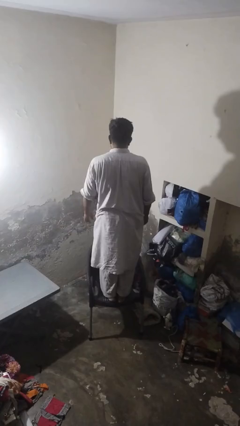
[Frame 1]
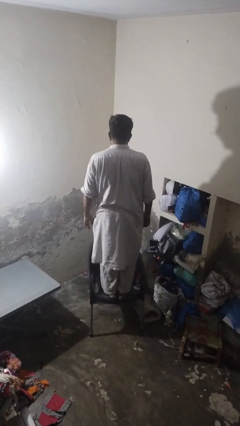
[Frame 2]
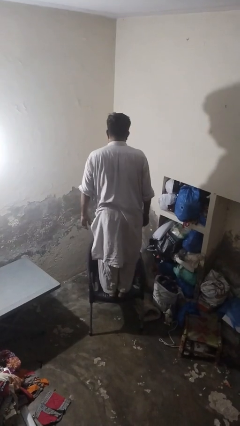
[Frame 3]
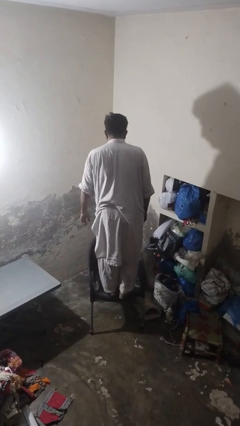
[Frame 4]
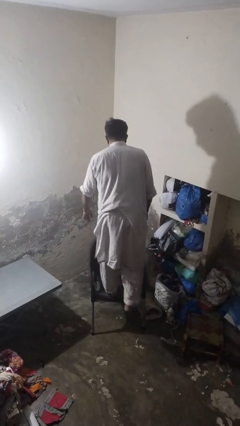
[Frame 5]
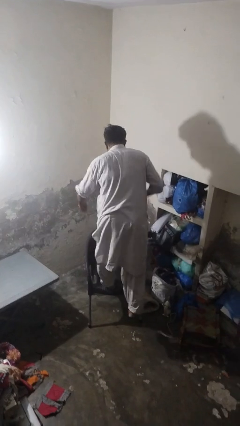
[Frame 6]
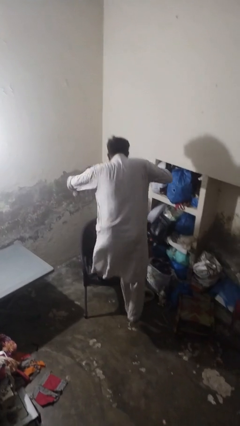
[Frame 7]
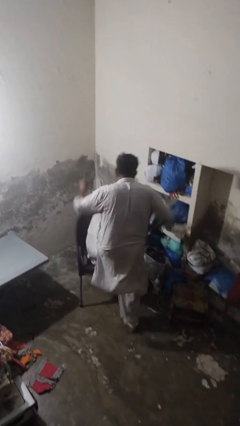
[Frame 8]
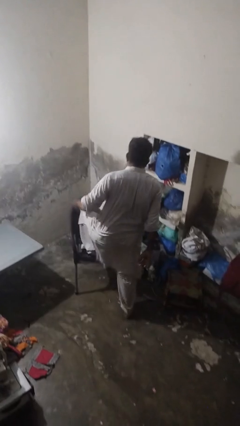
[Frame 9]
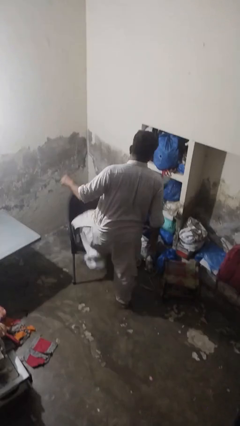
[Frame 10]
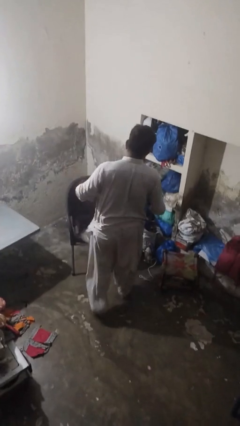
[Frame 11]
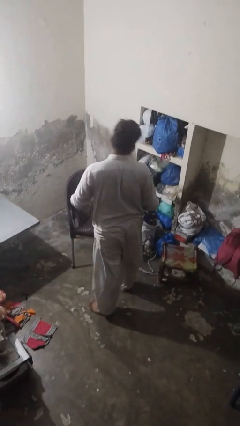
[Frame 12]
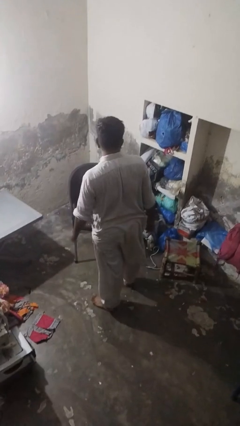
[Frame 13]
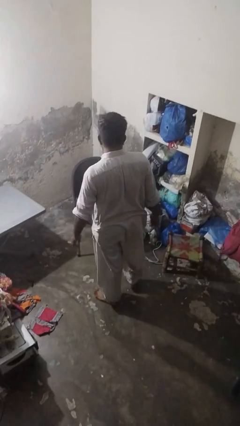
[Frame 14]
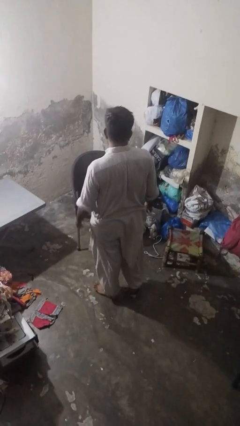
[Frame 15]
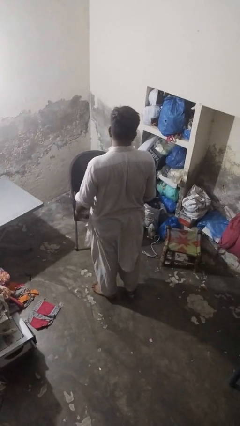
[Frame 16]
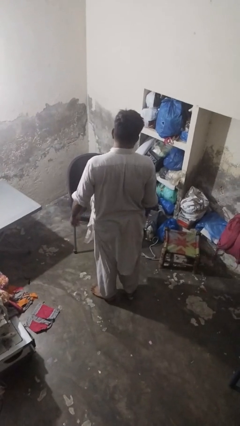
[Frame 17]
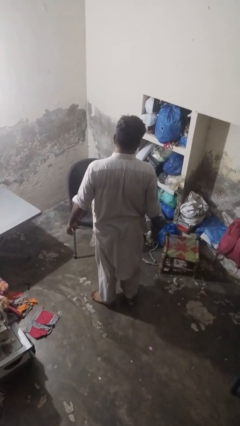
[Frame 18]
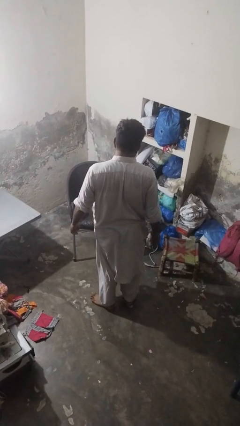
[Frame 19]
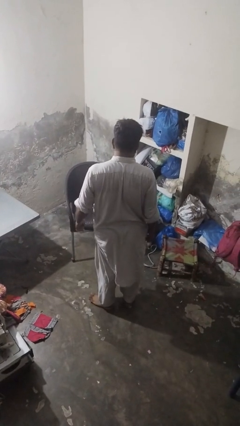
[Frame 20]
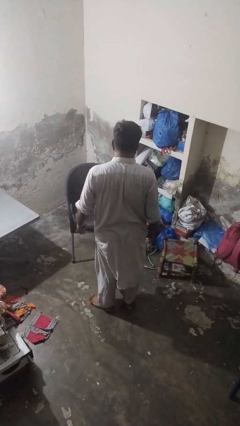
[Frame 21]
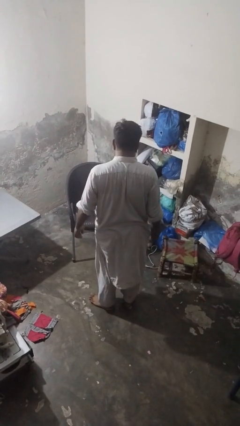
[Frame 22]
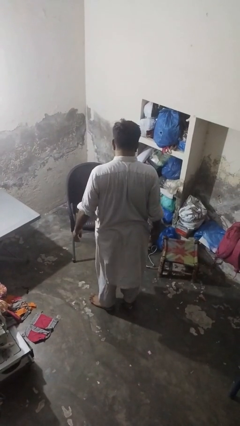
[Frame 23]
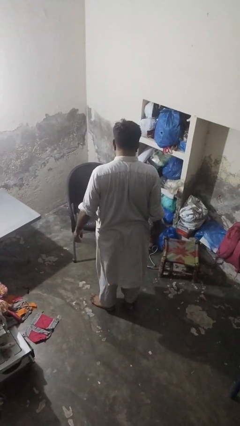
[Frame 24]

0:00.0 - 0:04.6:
person climbs off chair

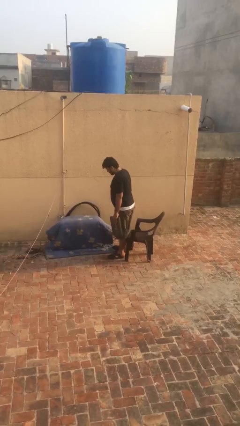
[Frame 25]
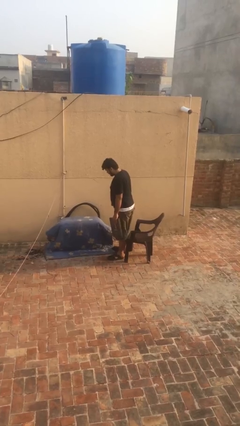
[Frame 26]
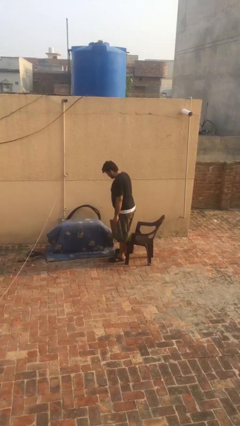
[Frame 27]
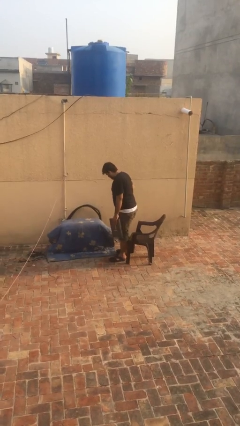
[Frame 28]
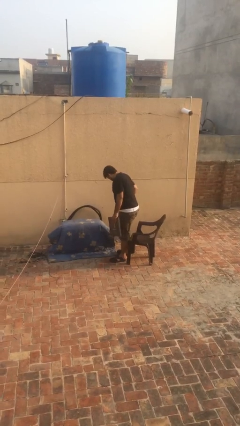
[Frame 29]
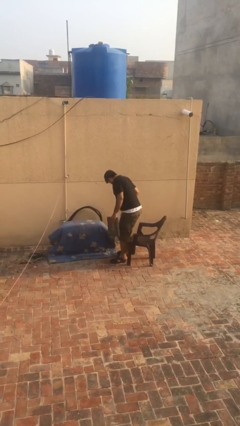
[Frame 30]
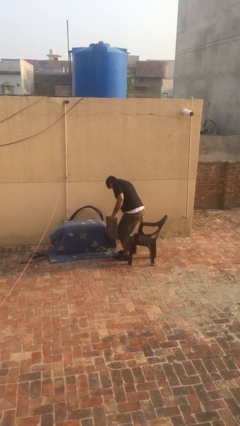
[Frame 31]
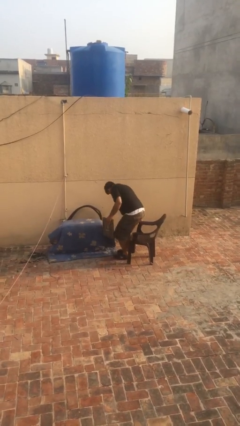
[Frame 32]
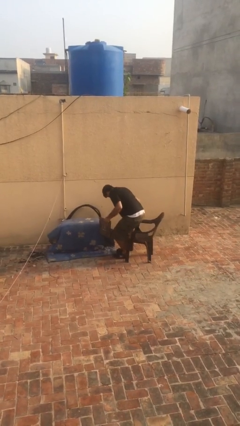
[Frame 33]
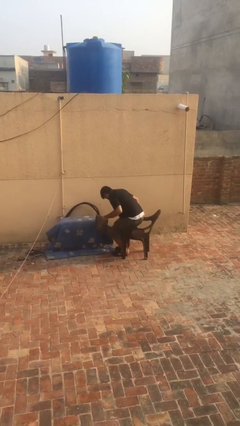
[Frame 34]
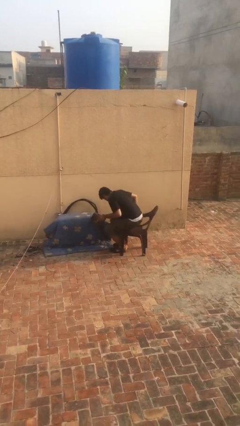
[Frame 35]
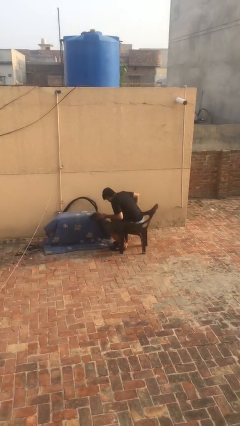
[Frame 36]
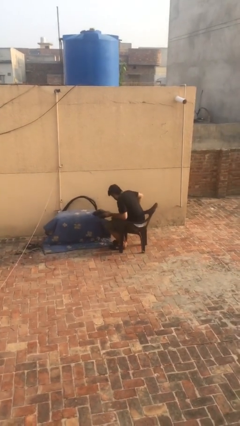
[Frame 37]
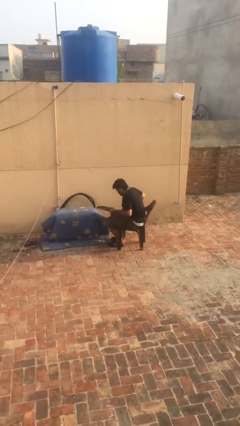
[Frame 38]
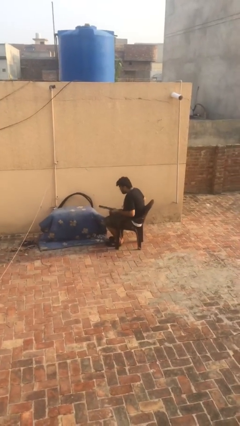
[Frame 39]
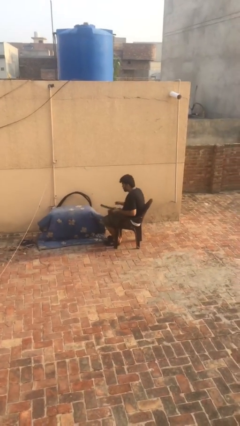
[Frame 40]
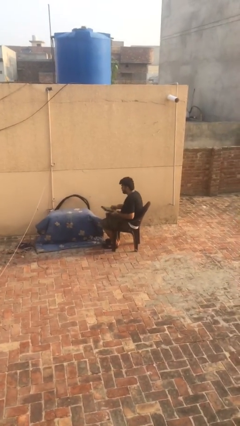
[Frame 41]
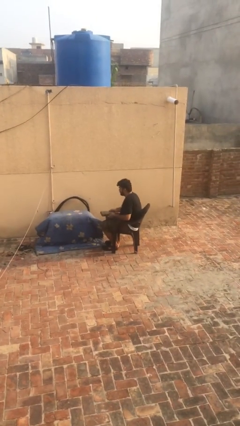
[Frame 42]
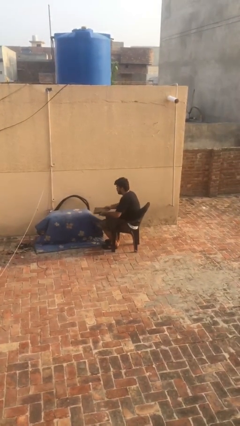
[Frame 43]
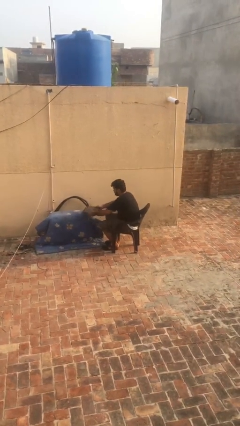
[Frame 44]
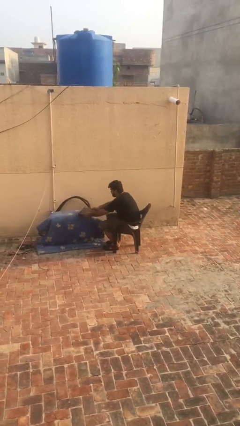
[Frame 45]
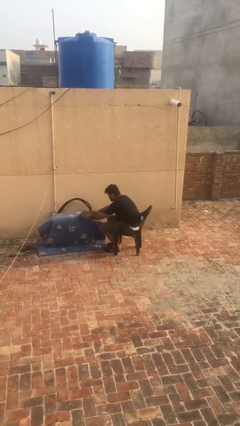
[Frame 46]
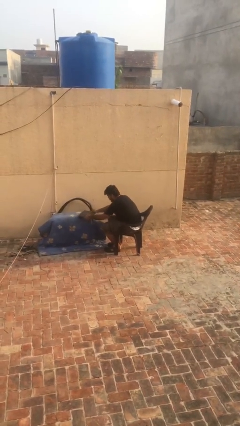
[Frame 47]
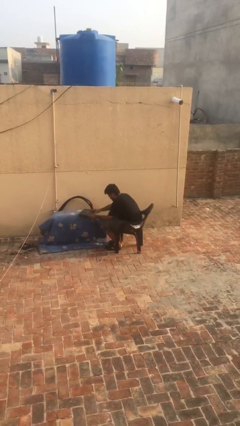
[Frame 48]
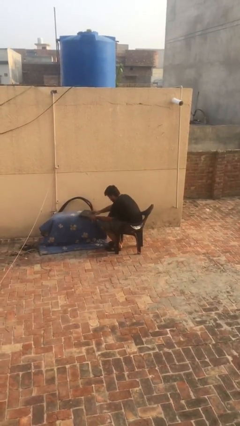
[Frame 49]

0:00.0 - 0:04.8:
person sits down

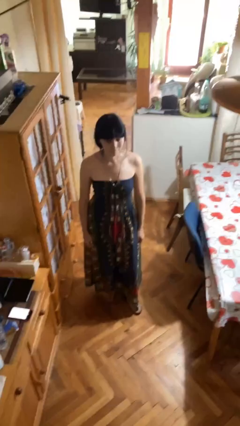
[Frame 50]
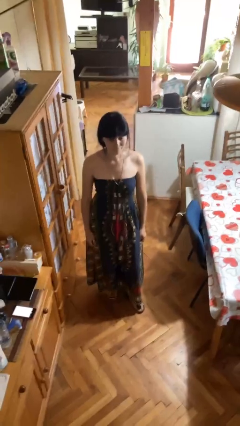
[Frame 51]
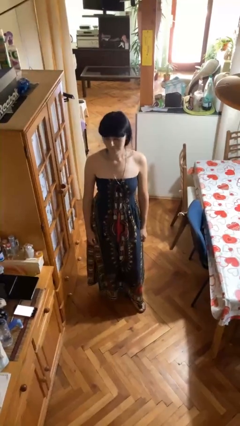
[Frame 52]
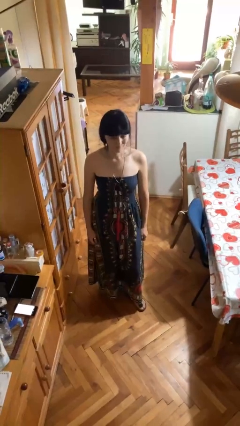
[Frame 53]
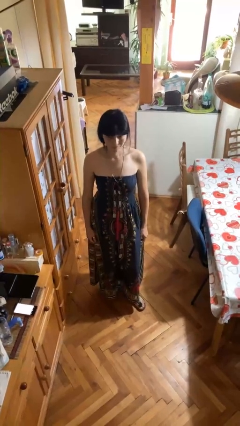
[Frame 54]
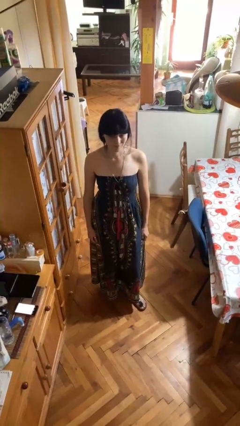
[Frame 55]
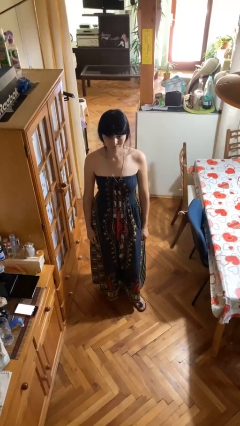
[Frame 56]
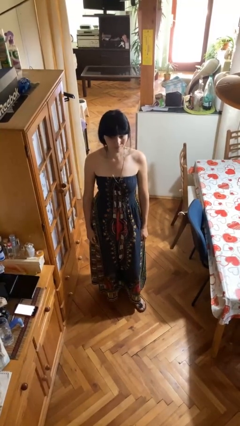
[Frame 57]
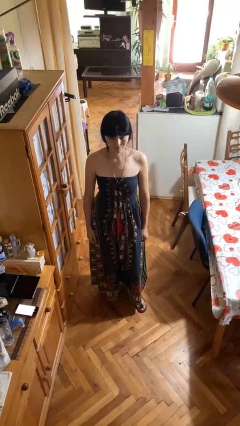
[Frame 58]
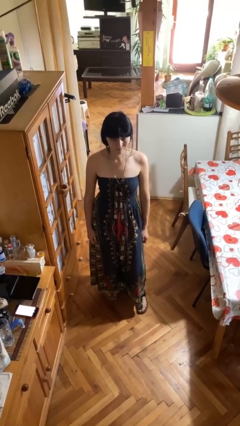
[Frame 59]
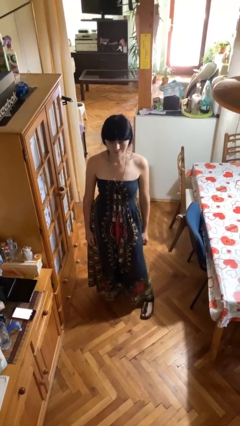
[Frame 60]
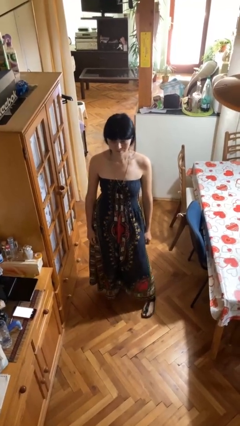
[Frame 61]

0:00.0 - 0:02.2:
person shakes head

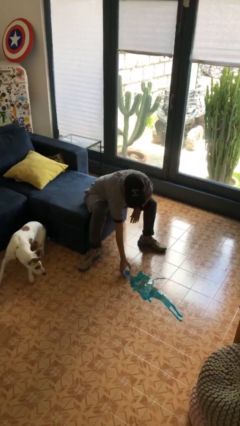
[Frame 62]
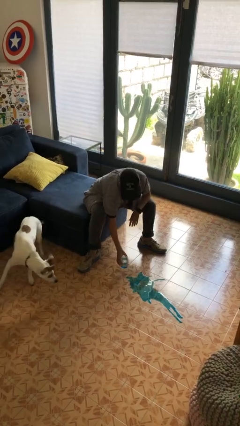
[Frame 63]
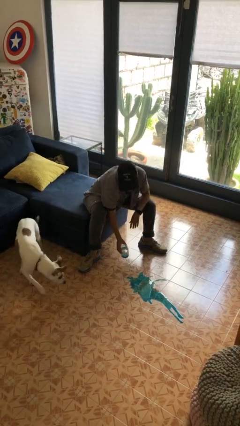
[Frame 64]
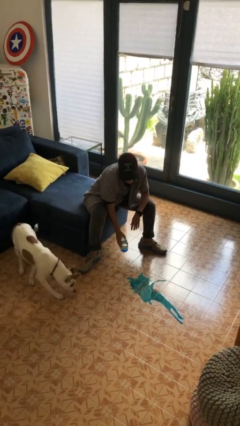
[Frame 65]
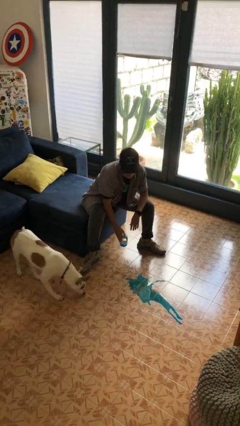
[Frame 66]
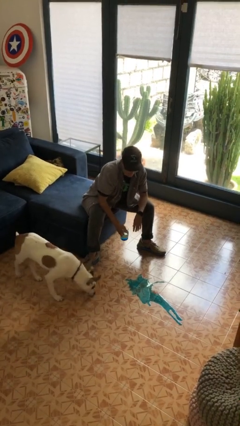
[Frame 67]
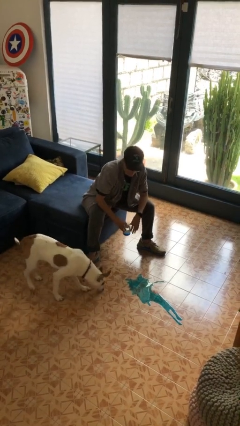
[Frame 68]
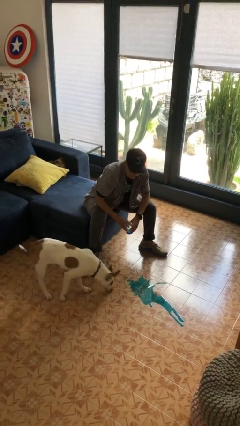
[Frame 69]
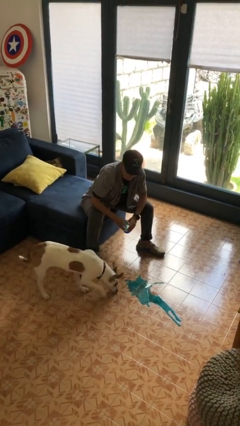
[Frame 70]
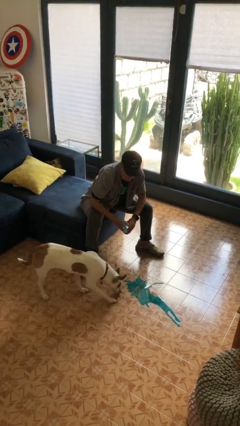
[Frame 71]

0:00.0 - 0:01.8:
person sets upright glass

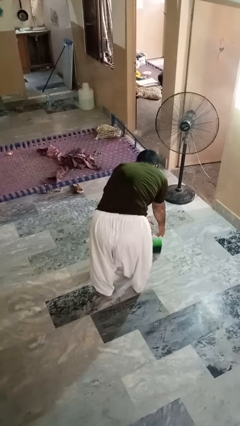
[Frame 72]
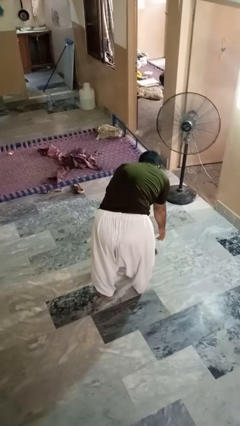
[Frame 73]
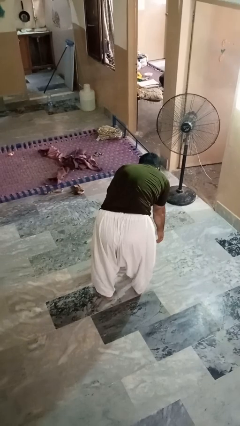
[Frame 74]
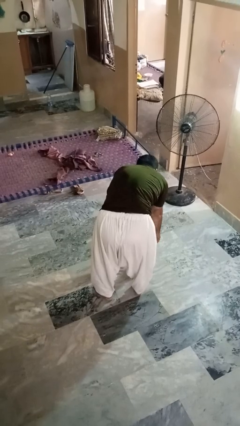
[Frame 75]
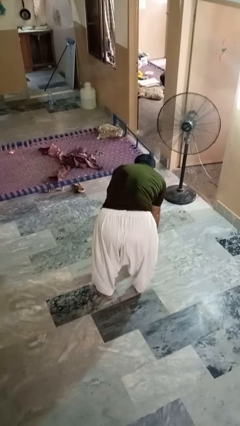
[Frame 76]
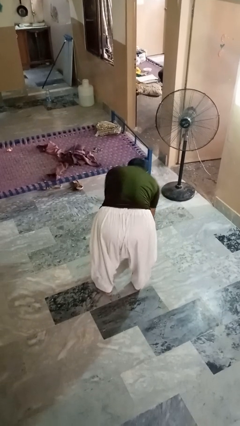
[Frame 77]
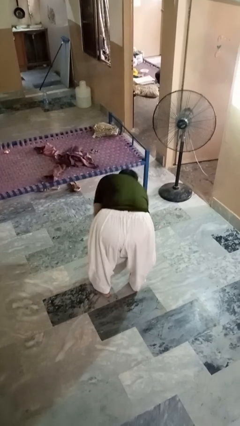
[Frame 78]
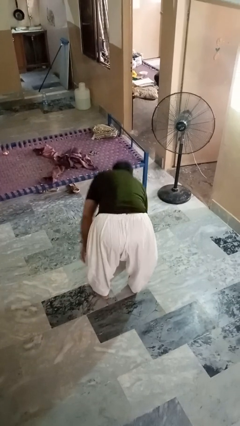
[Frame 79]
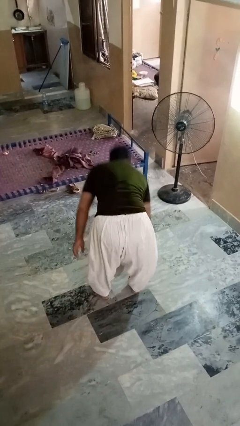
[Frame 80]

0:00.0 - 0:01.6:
person picks up object from floor

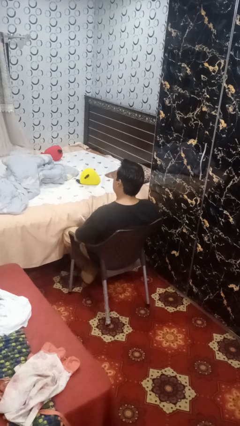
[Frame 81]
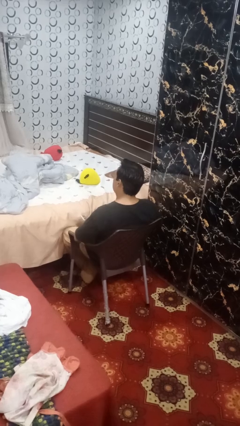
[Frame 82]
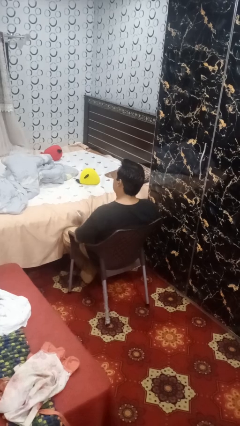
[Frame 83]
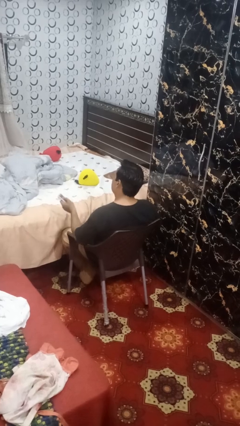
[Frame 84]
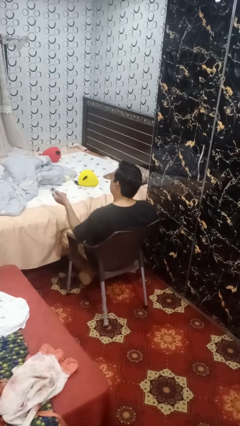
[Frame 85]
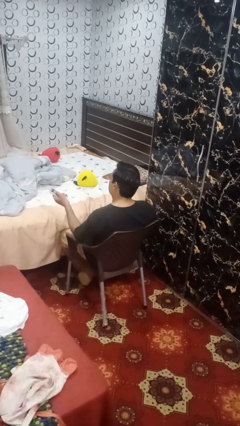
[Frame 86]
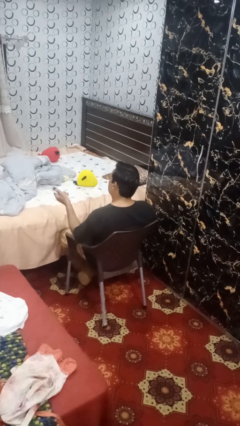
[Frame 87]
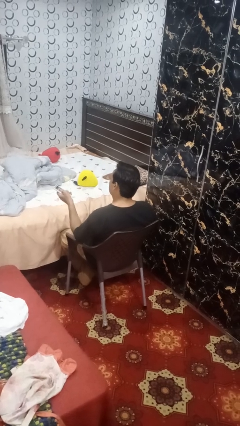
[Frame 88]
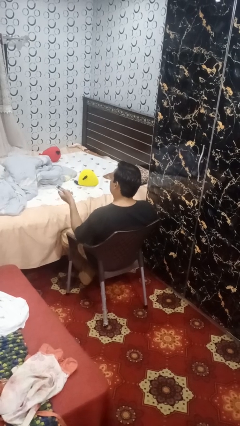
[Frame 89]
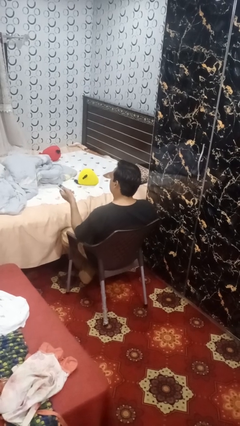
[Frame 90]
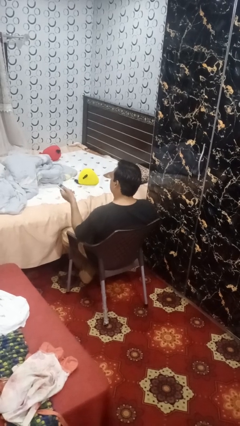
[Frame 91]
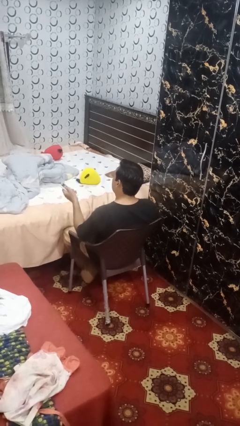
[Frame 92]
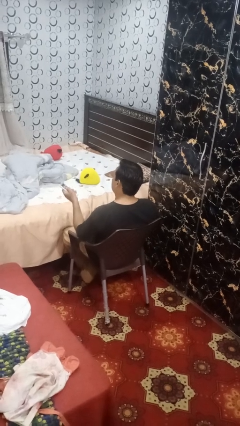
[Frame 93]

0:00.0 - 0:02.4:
person uses television remote

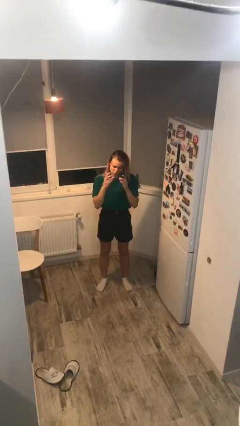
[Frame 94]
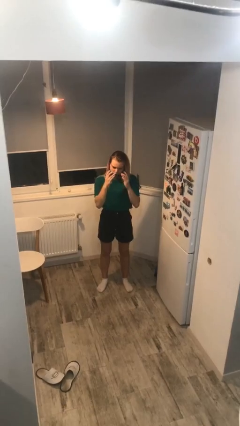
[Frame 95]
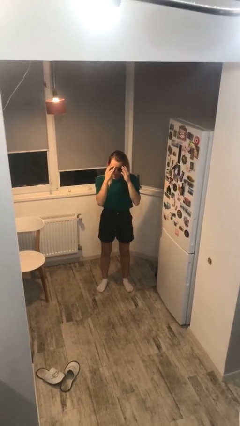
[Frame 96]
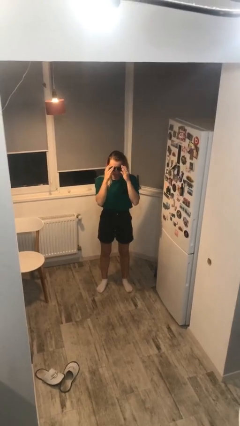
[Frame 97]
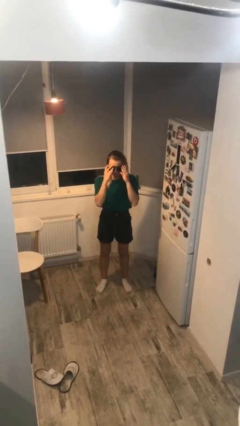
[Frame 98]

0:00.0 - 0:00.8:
person puts on glasses
